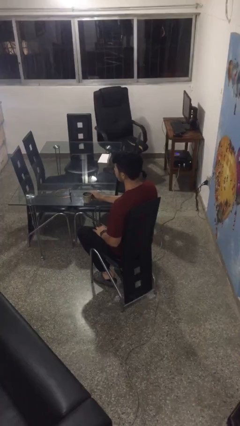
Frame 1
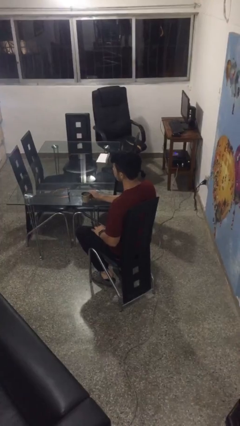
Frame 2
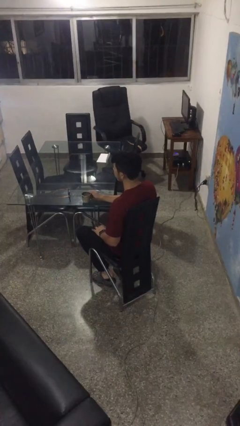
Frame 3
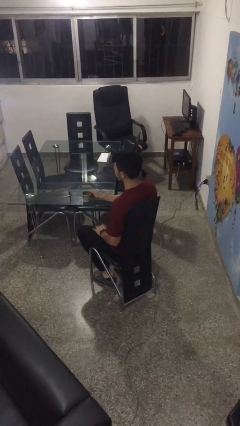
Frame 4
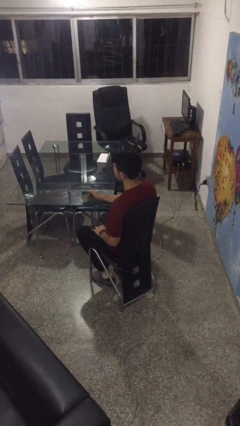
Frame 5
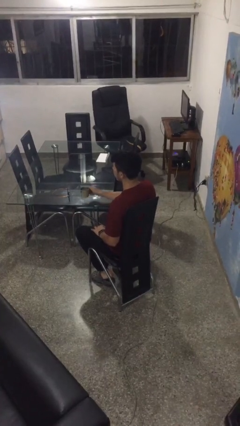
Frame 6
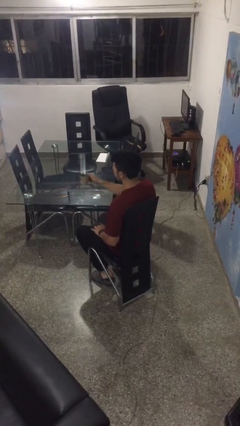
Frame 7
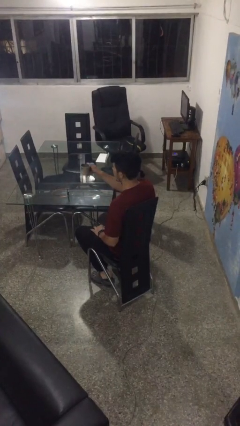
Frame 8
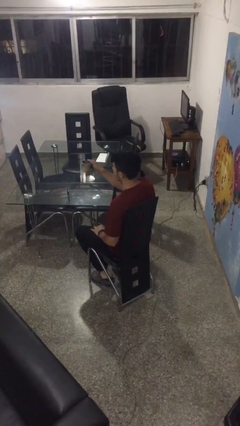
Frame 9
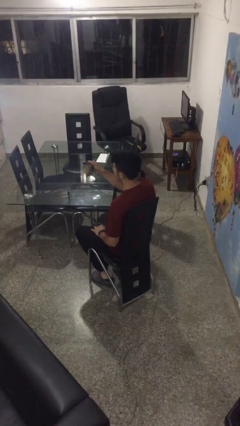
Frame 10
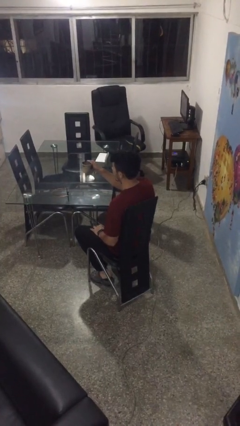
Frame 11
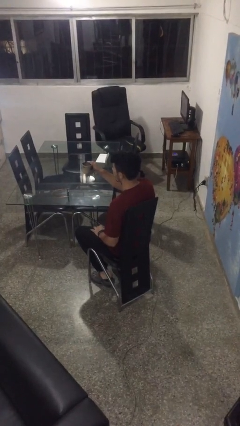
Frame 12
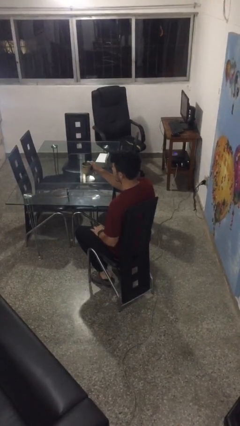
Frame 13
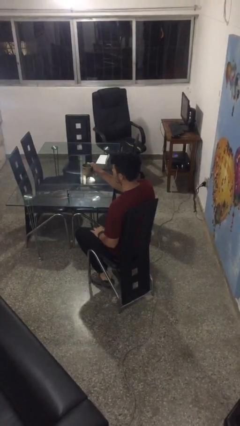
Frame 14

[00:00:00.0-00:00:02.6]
person picks up object from table

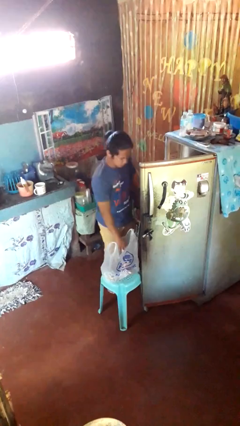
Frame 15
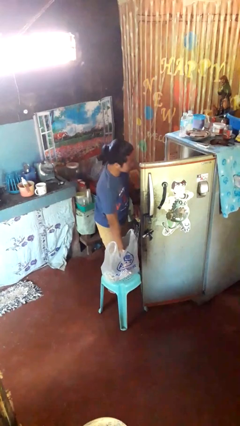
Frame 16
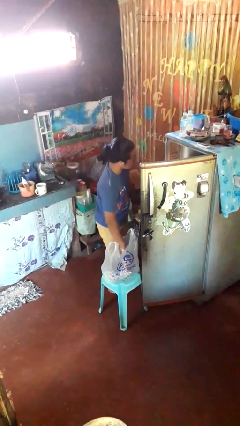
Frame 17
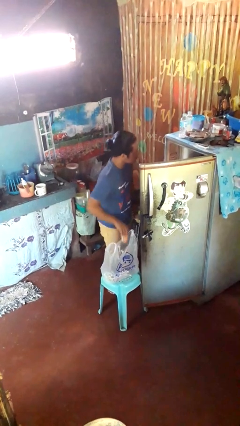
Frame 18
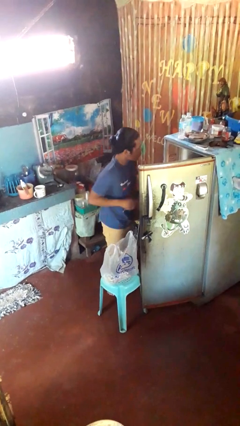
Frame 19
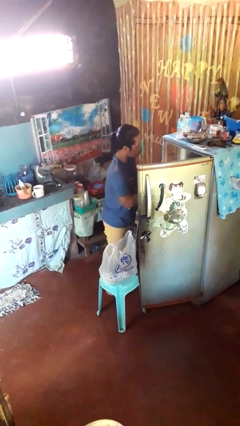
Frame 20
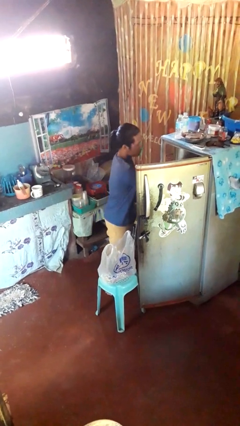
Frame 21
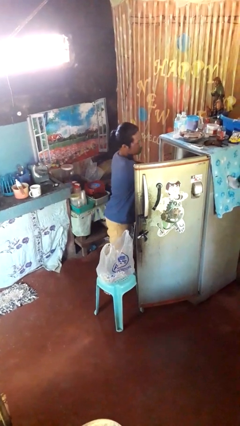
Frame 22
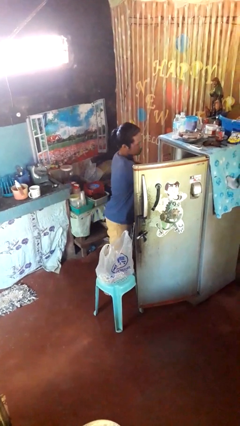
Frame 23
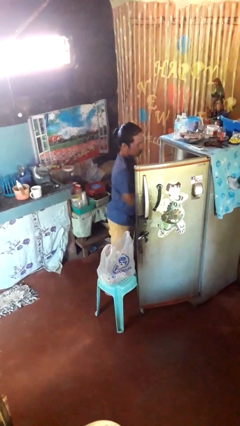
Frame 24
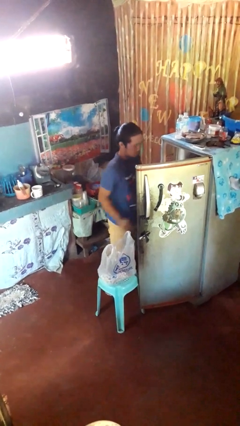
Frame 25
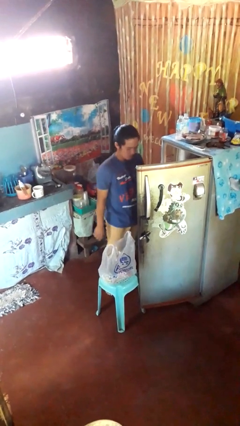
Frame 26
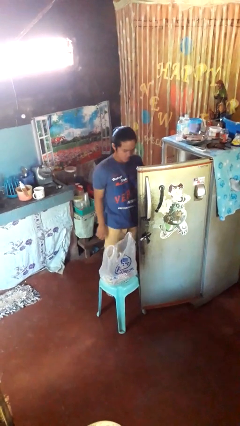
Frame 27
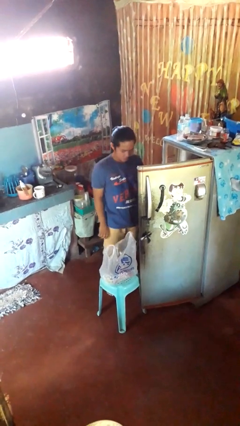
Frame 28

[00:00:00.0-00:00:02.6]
person loads groceries into refrigerator

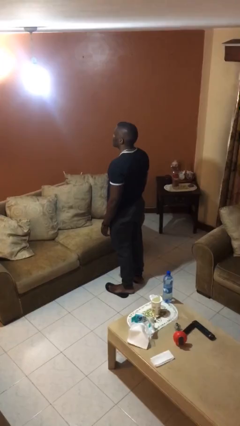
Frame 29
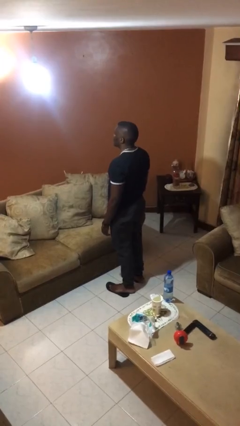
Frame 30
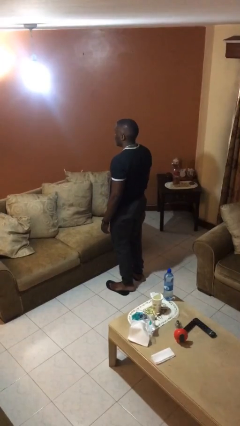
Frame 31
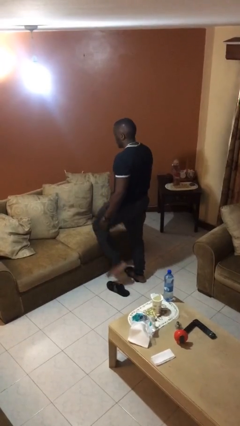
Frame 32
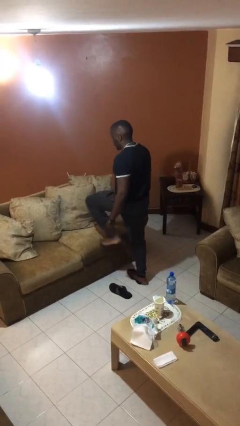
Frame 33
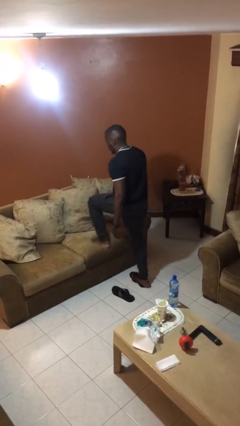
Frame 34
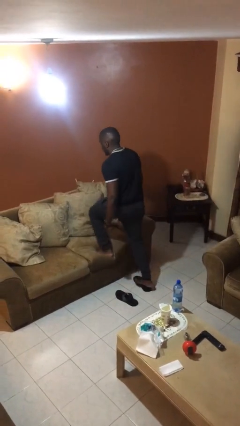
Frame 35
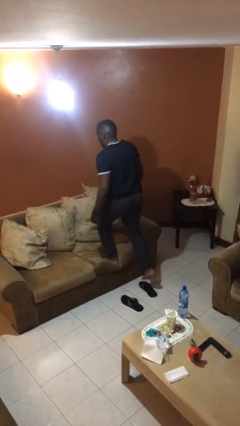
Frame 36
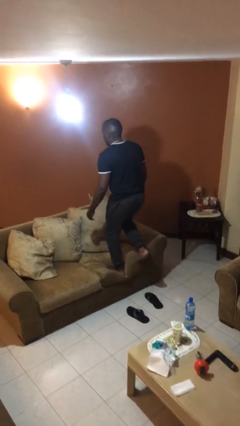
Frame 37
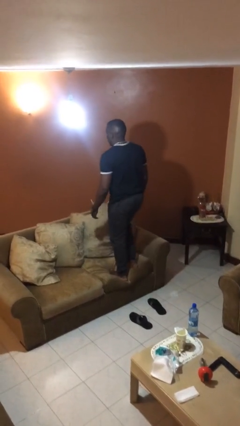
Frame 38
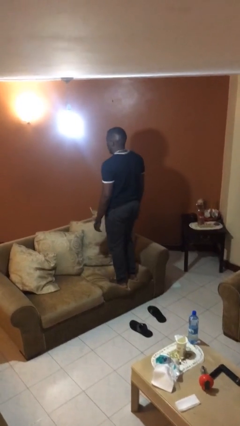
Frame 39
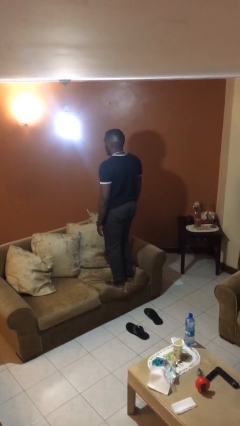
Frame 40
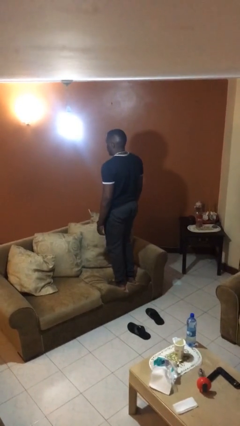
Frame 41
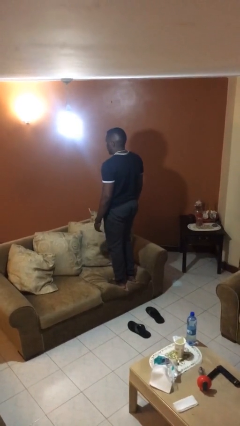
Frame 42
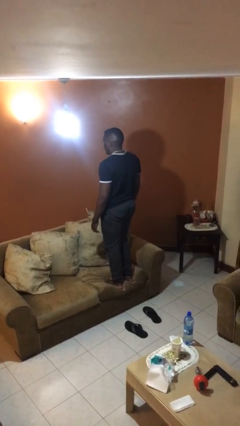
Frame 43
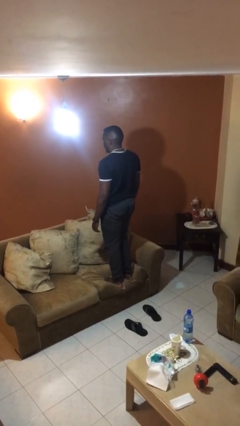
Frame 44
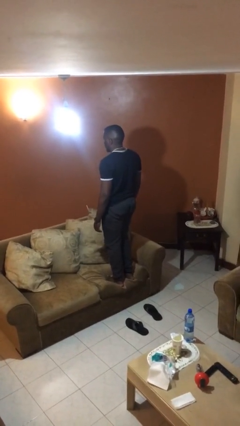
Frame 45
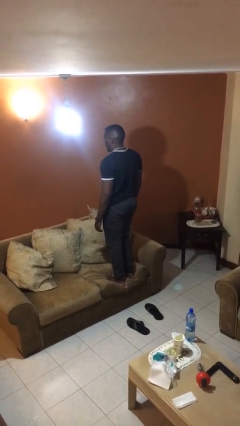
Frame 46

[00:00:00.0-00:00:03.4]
person climbs on chair

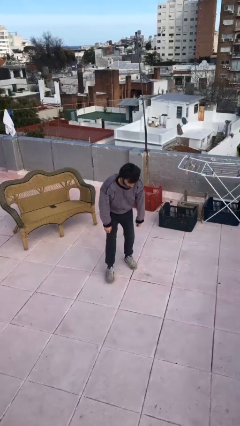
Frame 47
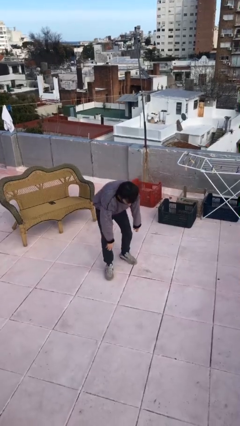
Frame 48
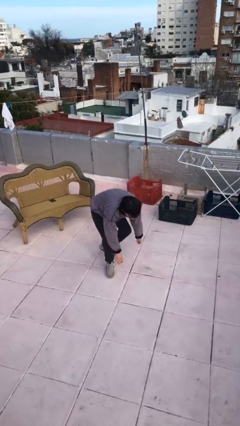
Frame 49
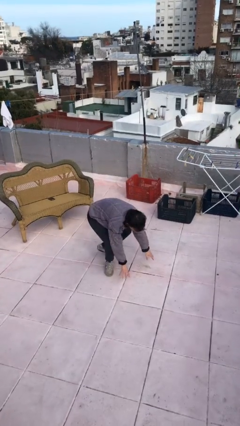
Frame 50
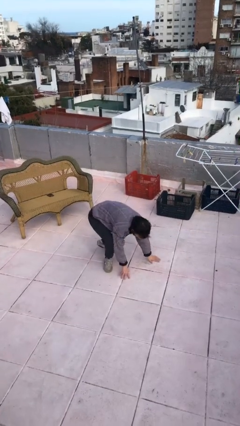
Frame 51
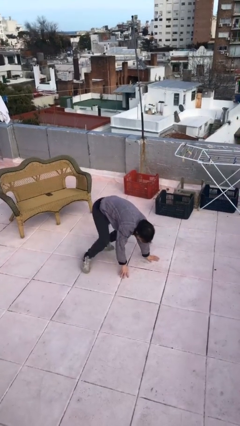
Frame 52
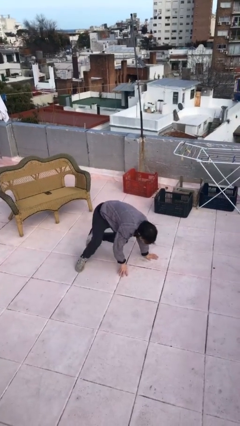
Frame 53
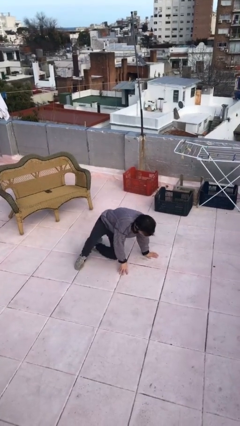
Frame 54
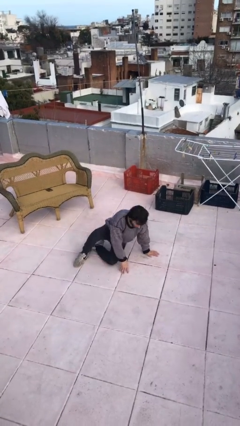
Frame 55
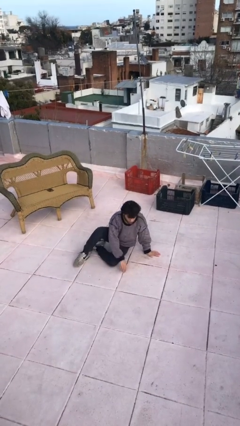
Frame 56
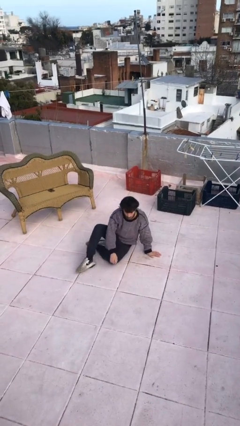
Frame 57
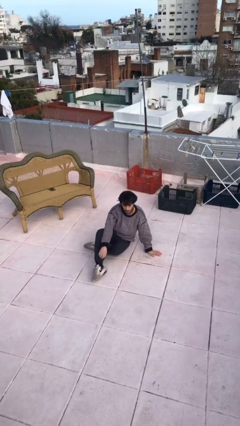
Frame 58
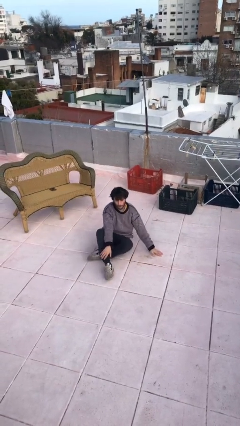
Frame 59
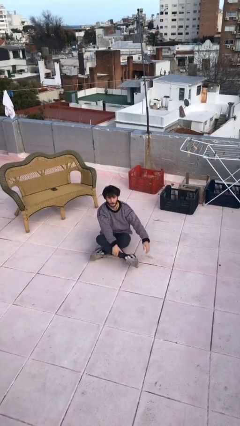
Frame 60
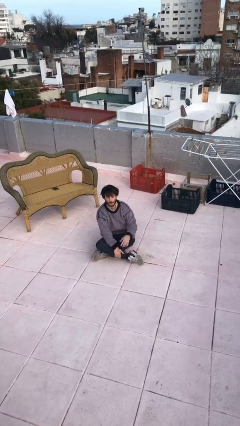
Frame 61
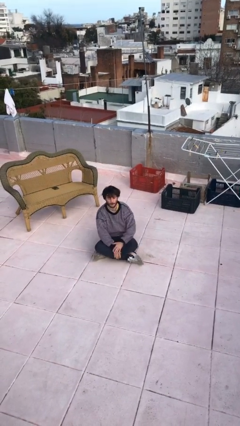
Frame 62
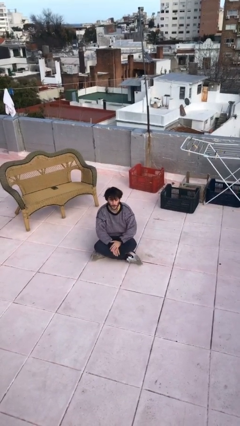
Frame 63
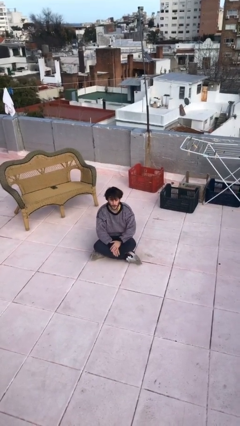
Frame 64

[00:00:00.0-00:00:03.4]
person sits crisscross

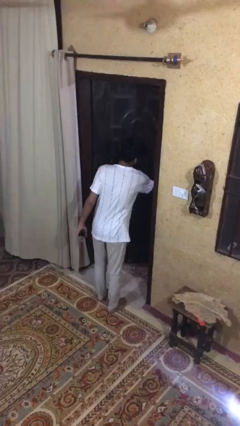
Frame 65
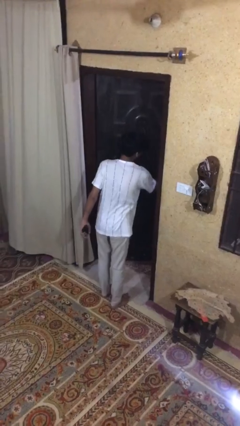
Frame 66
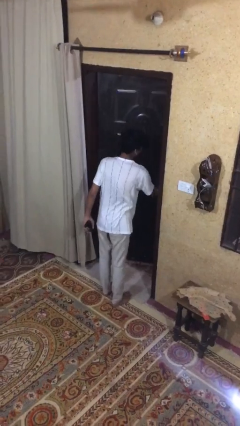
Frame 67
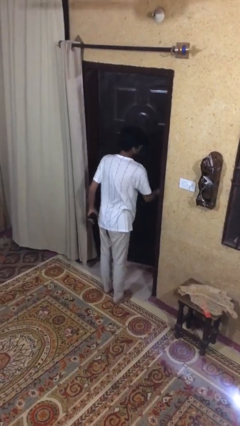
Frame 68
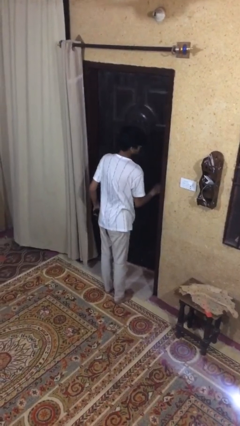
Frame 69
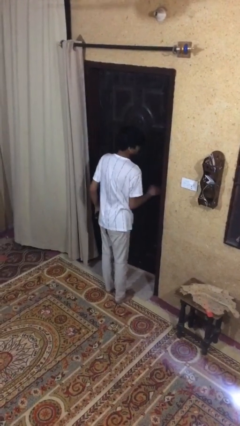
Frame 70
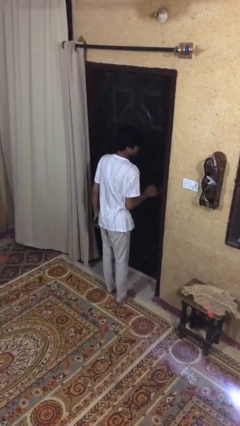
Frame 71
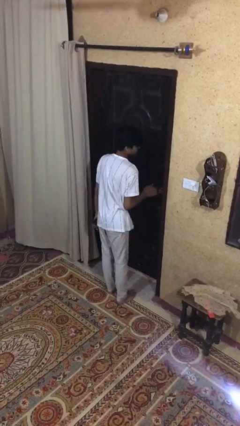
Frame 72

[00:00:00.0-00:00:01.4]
person closes facility door

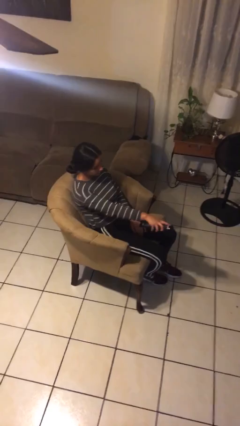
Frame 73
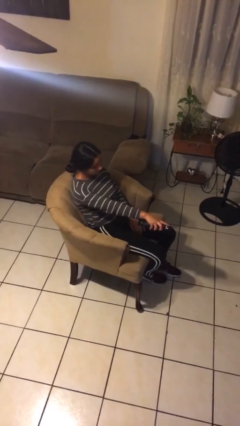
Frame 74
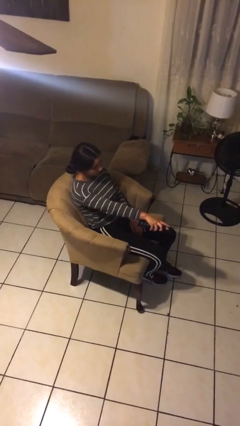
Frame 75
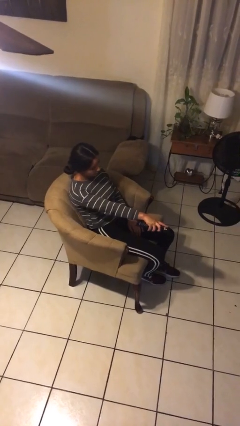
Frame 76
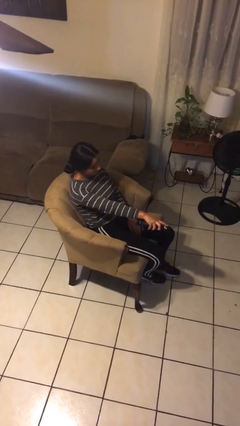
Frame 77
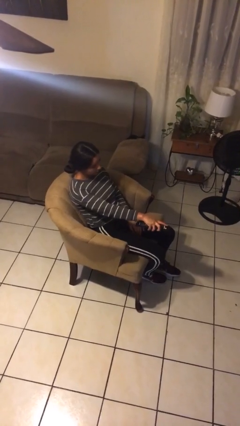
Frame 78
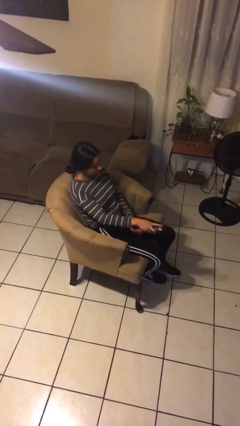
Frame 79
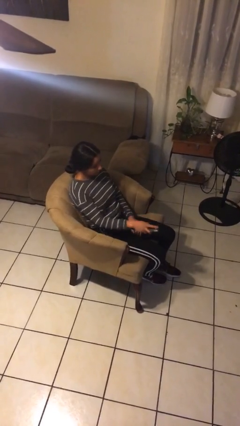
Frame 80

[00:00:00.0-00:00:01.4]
person uses television remote

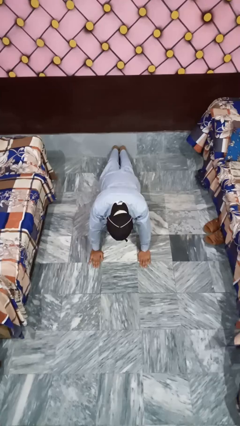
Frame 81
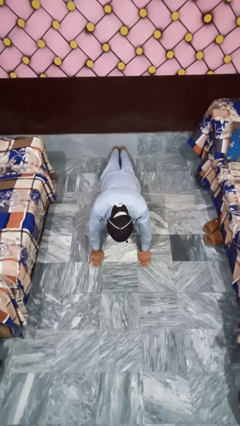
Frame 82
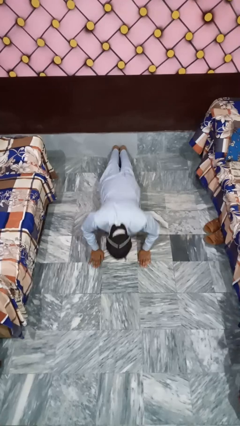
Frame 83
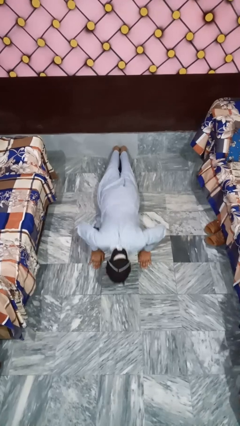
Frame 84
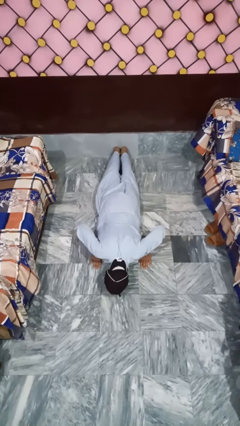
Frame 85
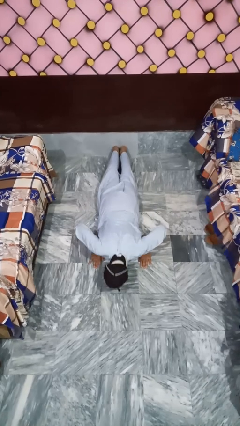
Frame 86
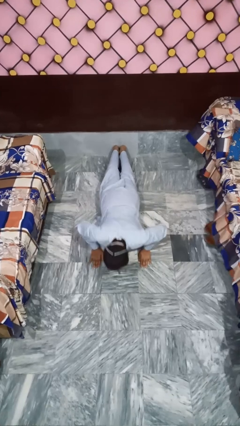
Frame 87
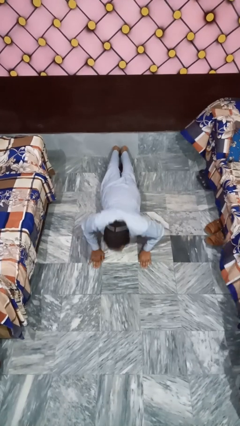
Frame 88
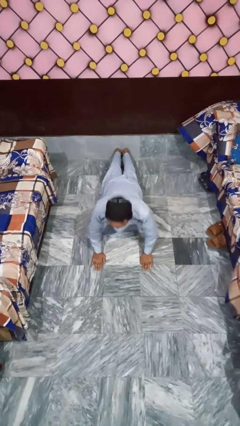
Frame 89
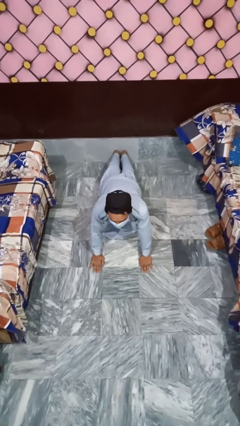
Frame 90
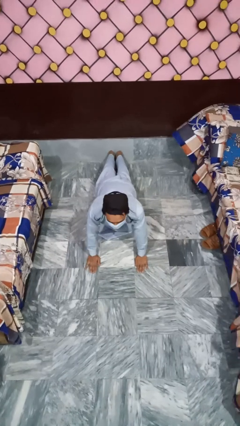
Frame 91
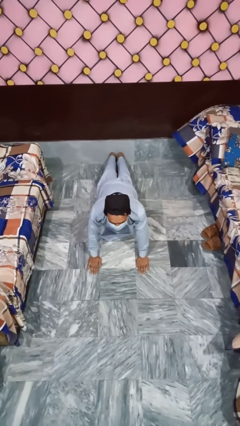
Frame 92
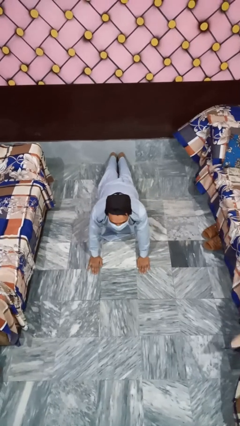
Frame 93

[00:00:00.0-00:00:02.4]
person exercises with pushup
